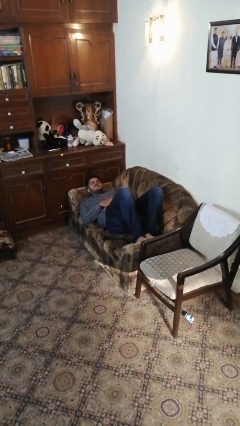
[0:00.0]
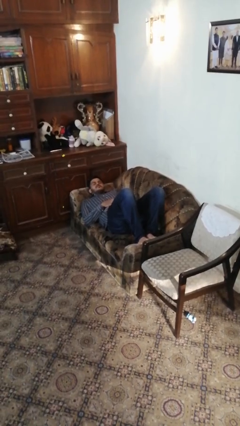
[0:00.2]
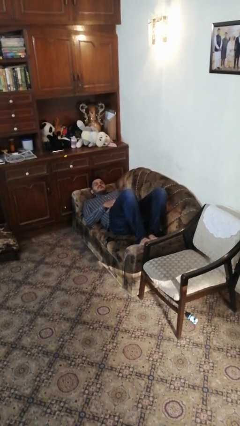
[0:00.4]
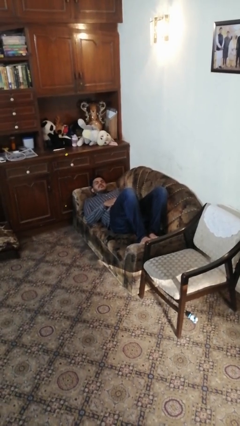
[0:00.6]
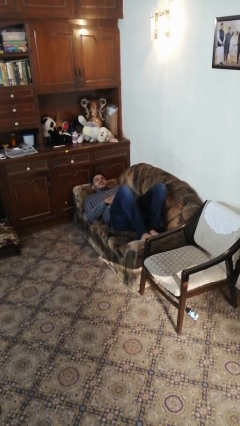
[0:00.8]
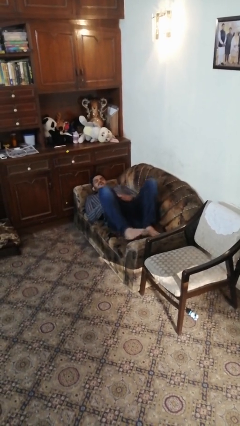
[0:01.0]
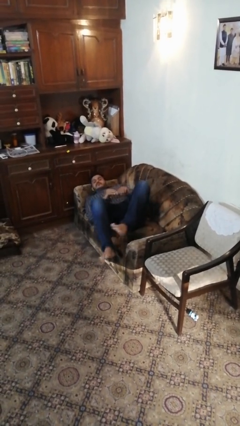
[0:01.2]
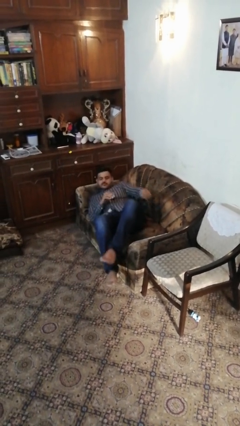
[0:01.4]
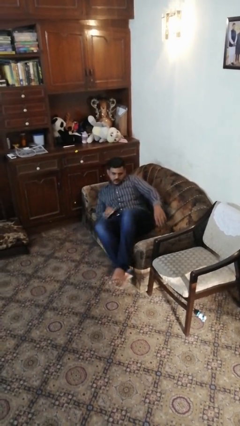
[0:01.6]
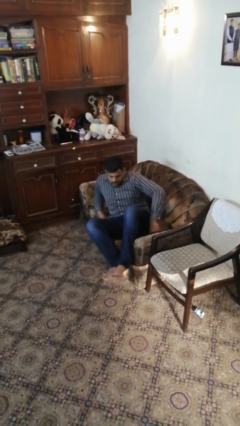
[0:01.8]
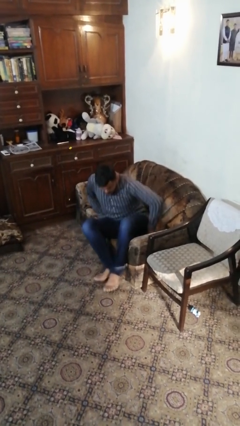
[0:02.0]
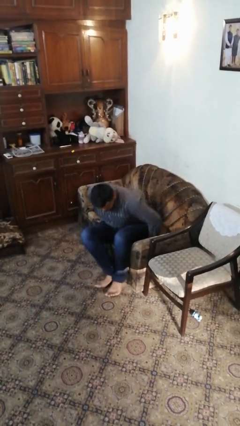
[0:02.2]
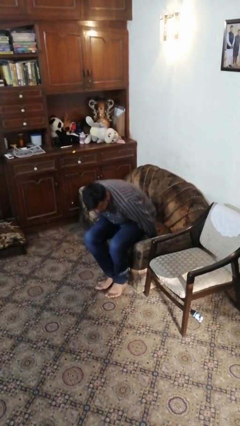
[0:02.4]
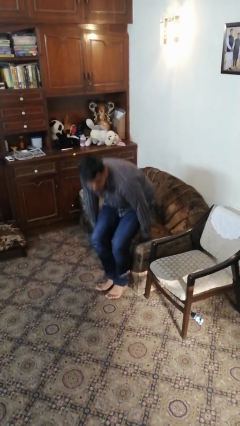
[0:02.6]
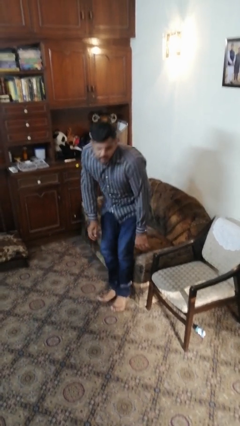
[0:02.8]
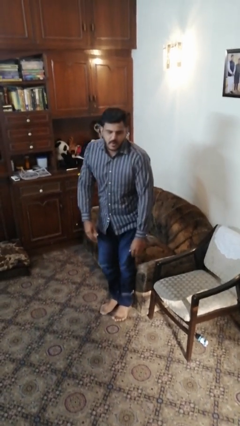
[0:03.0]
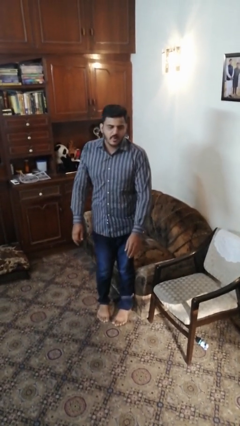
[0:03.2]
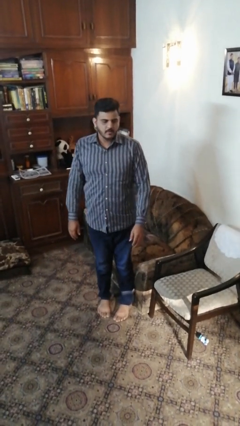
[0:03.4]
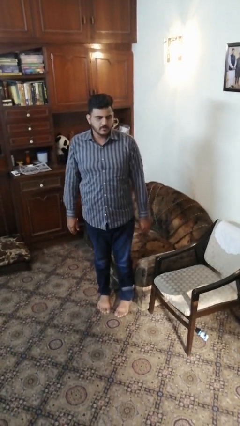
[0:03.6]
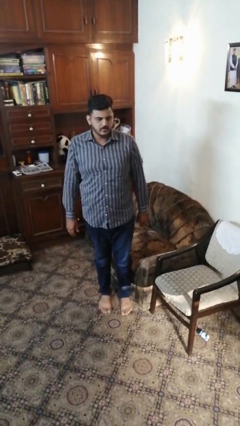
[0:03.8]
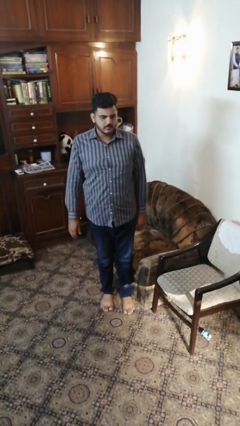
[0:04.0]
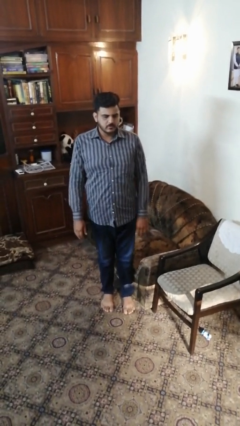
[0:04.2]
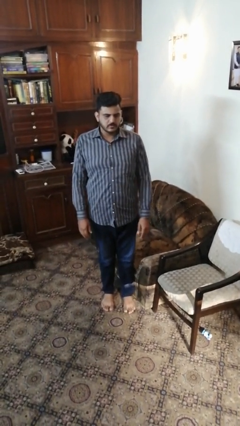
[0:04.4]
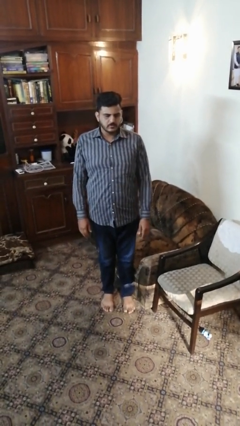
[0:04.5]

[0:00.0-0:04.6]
person stands up

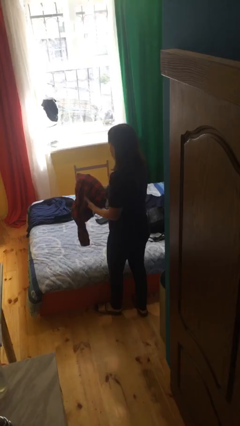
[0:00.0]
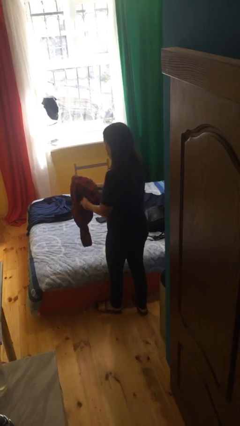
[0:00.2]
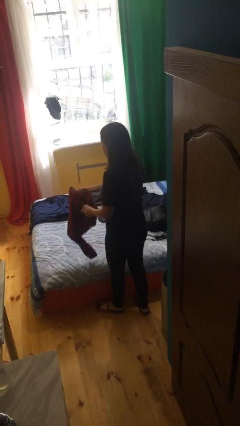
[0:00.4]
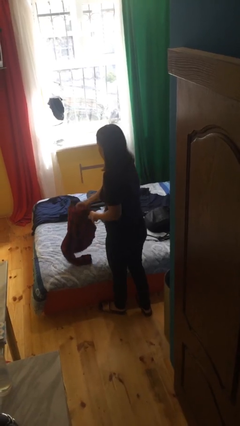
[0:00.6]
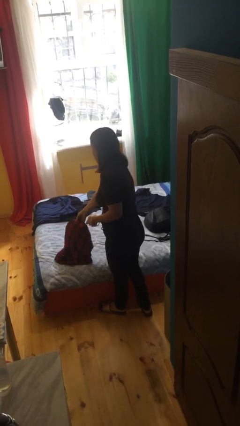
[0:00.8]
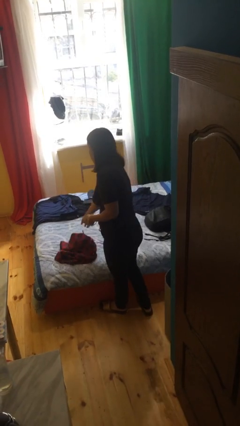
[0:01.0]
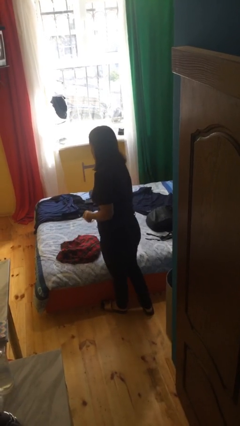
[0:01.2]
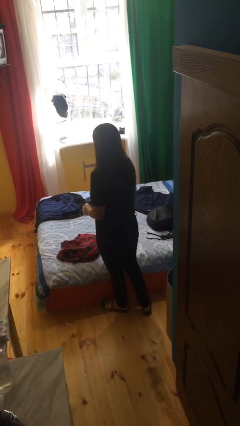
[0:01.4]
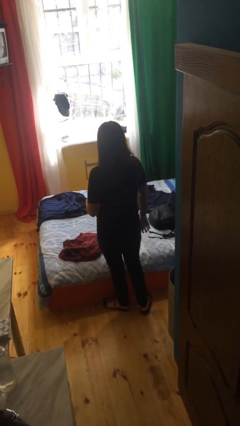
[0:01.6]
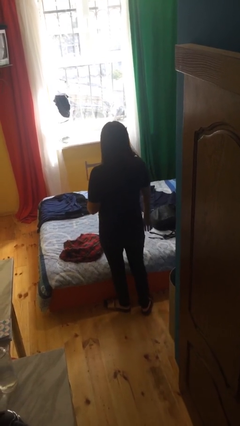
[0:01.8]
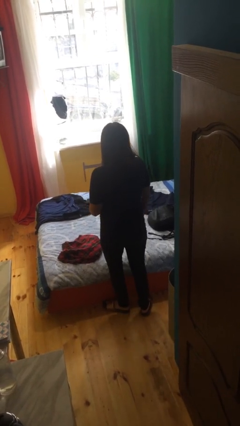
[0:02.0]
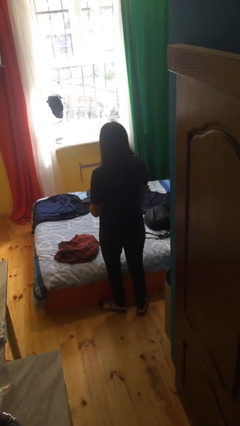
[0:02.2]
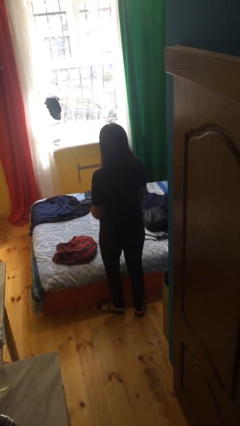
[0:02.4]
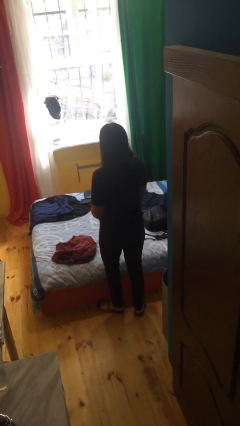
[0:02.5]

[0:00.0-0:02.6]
person puts down object on bed

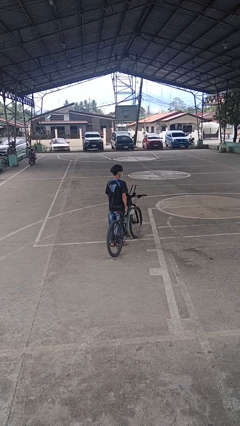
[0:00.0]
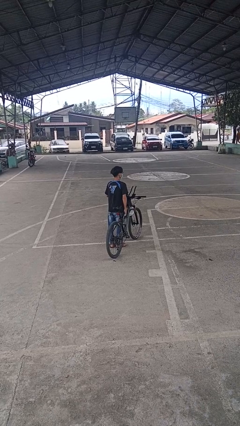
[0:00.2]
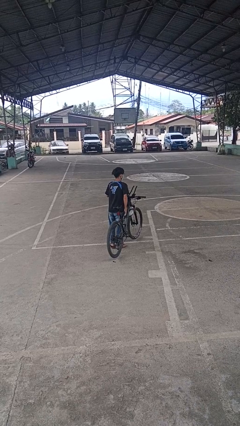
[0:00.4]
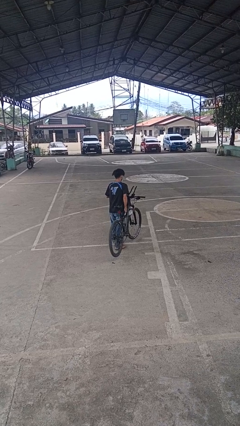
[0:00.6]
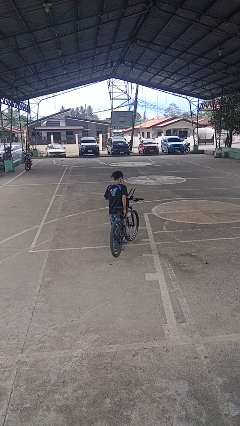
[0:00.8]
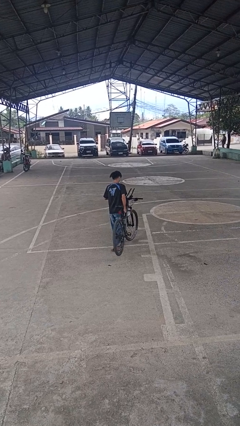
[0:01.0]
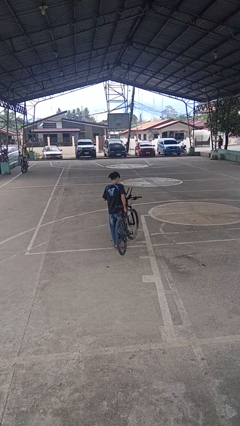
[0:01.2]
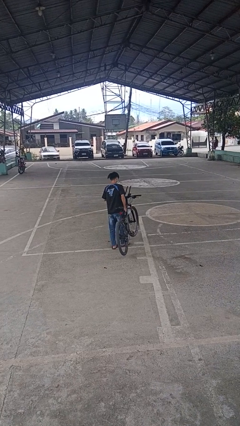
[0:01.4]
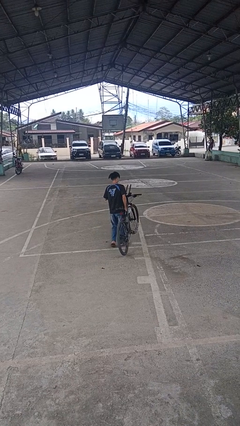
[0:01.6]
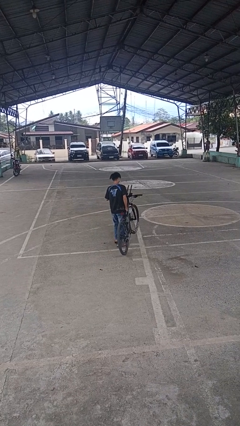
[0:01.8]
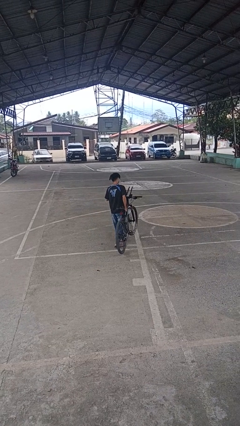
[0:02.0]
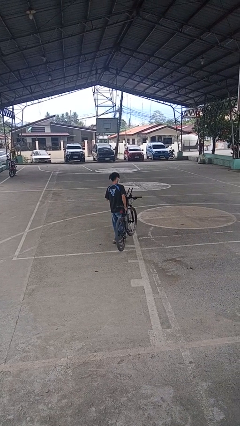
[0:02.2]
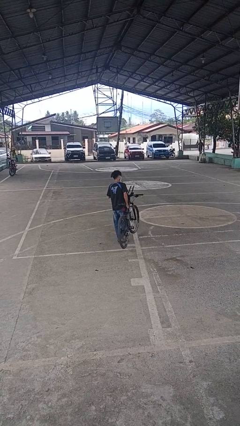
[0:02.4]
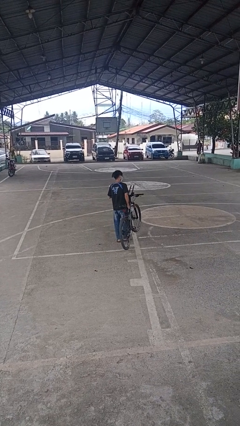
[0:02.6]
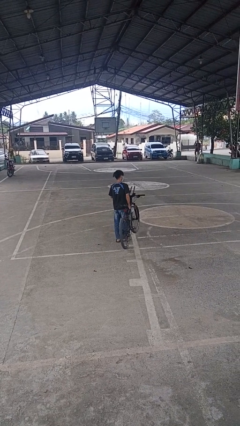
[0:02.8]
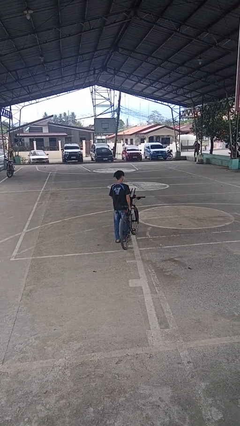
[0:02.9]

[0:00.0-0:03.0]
person carries bicycle

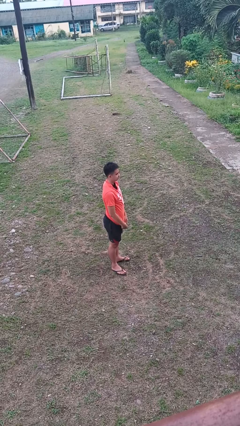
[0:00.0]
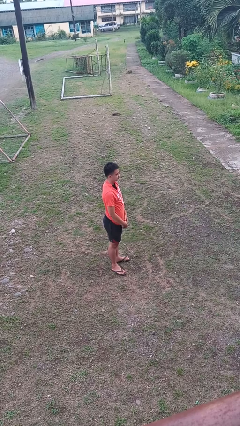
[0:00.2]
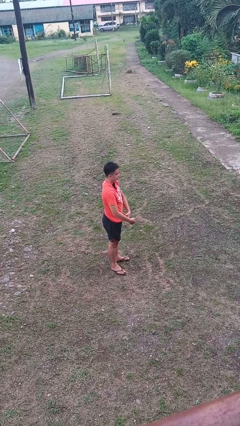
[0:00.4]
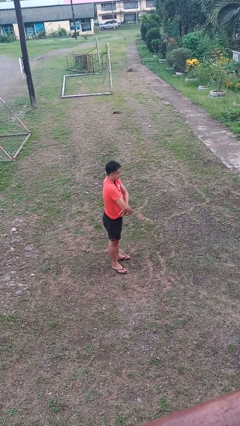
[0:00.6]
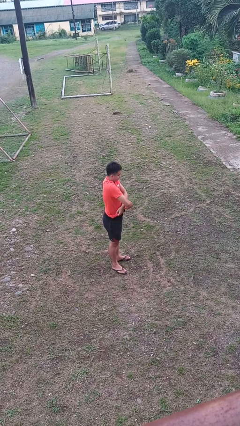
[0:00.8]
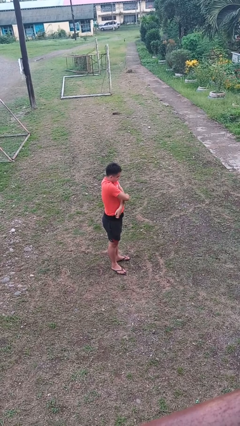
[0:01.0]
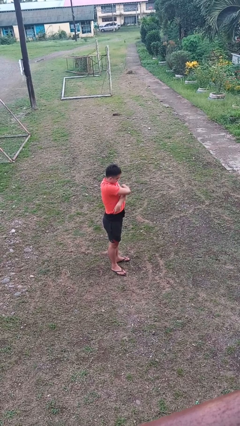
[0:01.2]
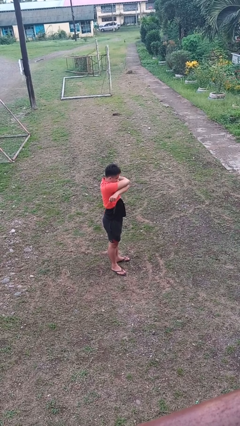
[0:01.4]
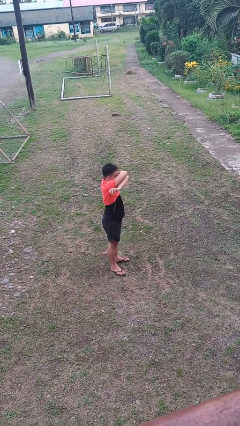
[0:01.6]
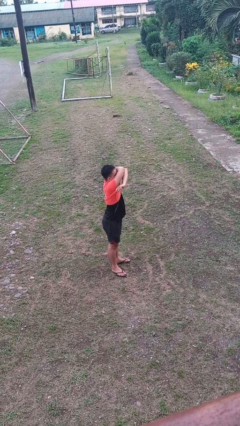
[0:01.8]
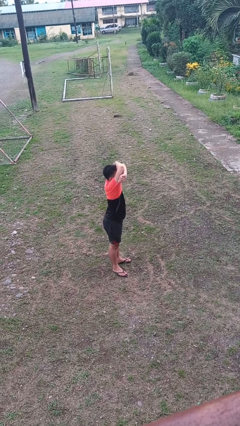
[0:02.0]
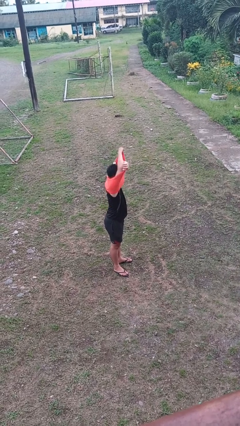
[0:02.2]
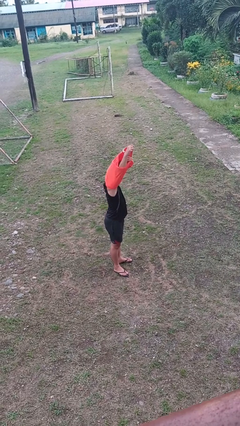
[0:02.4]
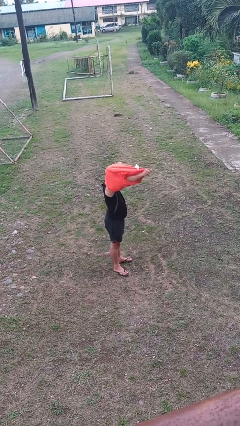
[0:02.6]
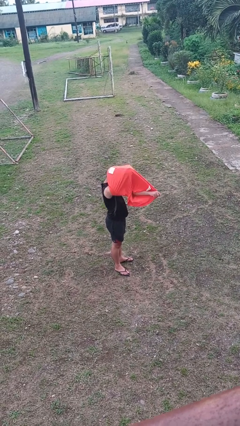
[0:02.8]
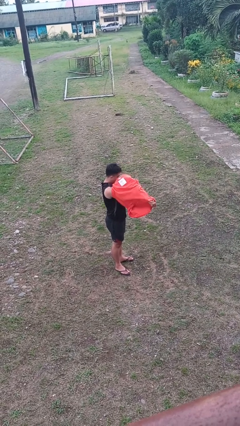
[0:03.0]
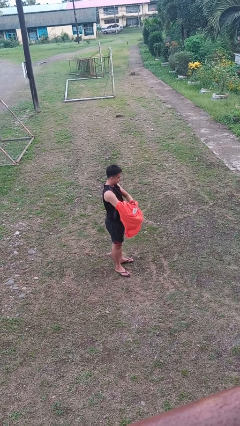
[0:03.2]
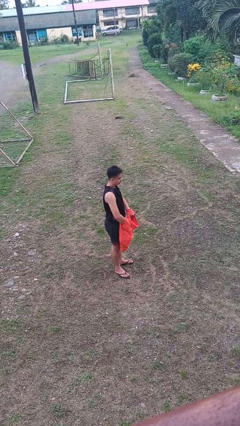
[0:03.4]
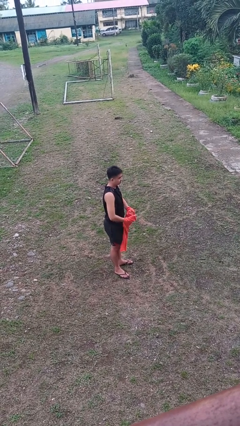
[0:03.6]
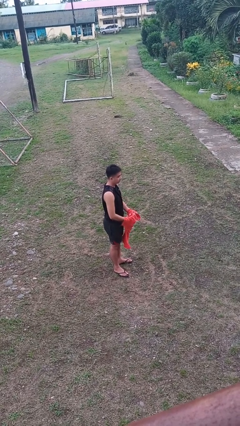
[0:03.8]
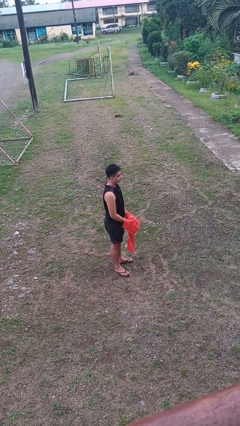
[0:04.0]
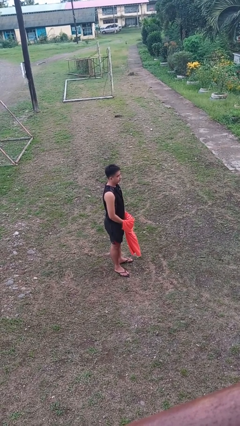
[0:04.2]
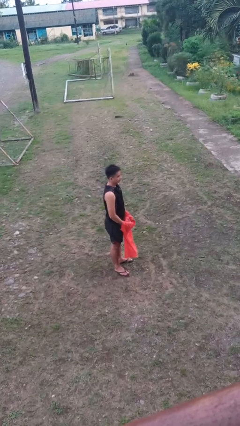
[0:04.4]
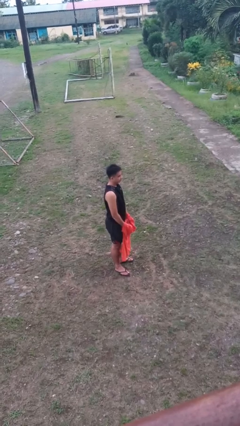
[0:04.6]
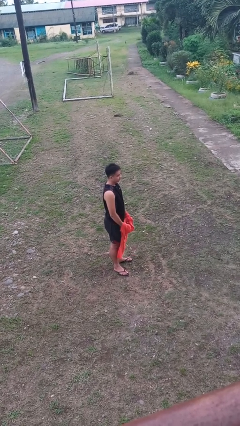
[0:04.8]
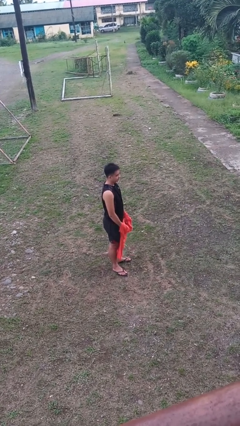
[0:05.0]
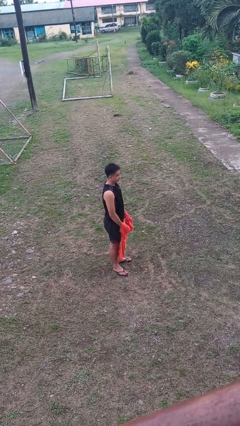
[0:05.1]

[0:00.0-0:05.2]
person takes off shirt

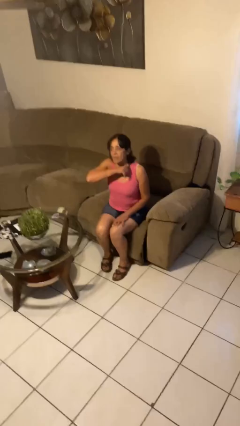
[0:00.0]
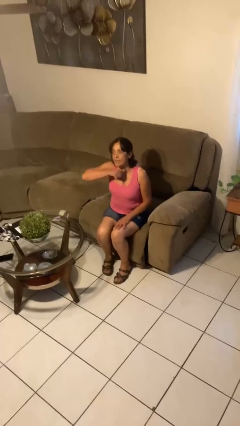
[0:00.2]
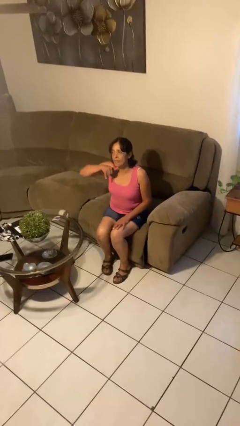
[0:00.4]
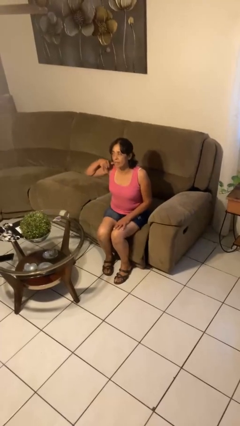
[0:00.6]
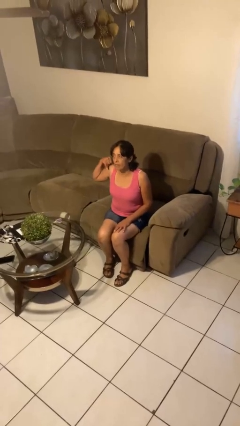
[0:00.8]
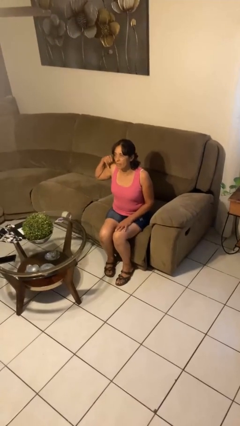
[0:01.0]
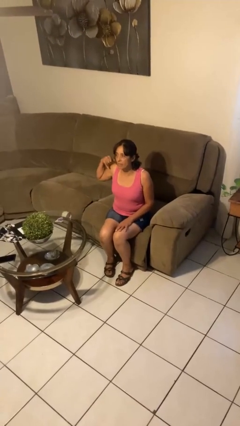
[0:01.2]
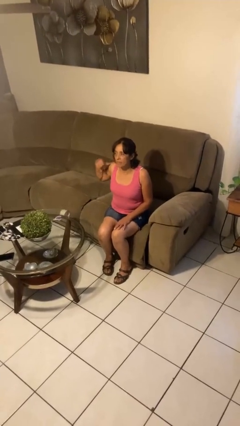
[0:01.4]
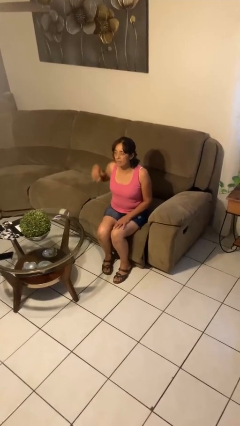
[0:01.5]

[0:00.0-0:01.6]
person gestures cut

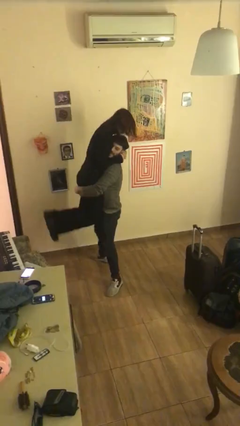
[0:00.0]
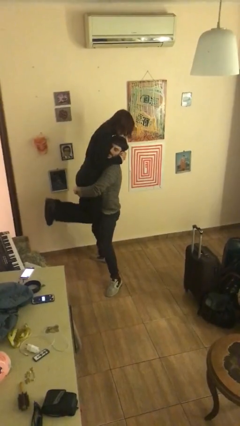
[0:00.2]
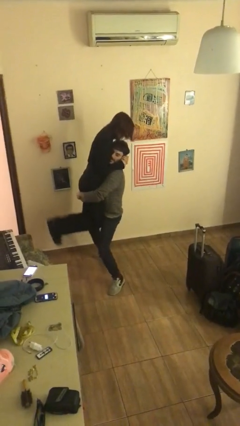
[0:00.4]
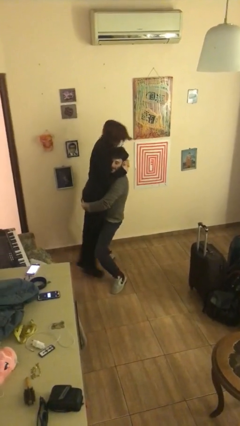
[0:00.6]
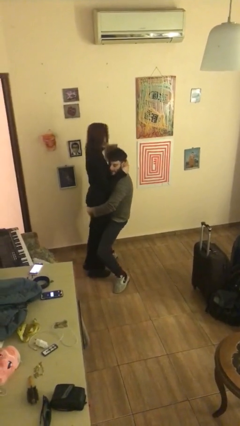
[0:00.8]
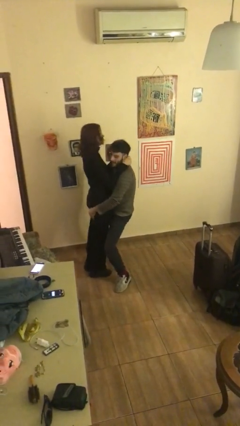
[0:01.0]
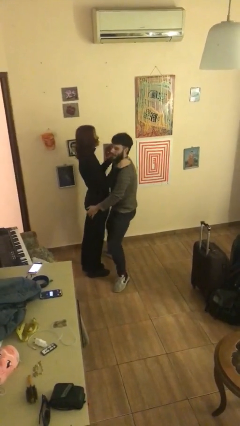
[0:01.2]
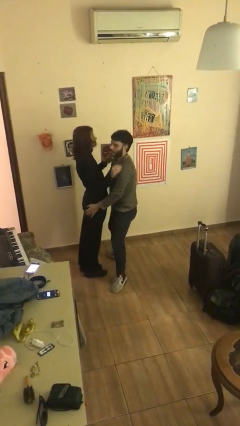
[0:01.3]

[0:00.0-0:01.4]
person puts down person
